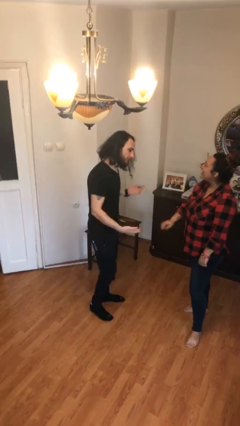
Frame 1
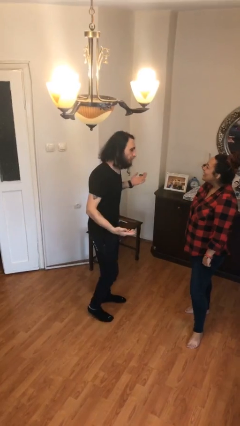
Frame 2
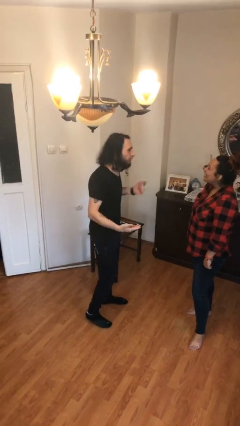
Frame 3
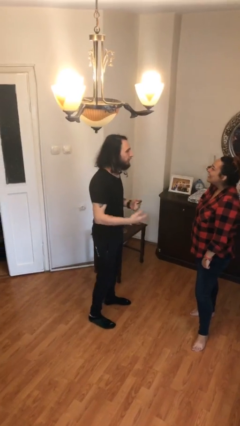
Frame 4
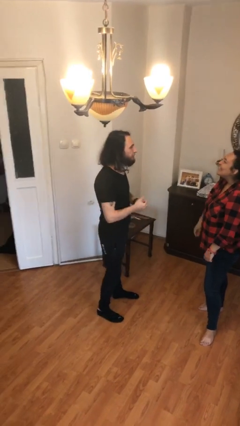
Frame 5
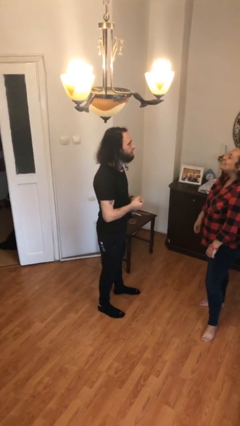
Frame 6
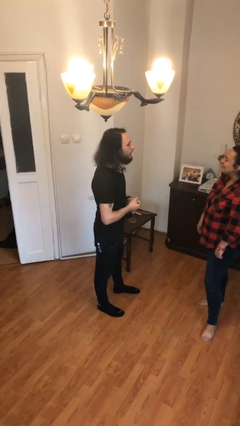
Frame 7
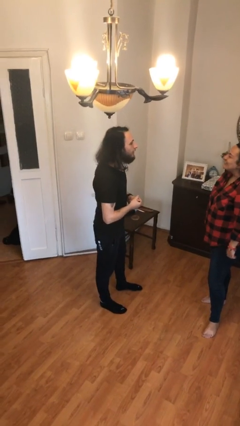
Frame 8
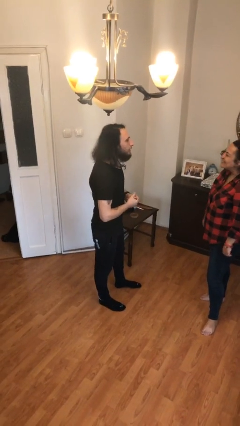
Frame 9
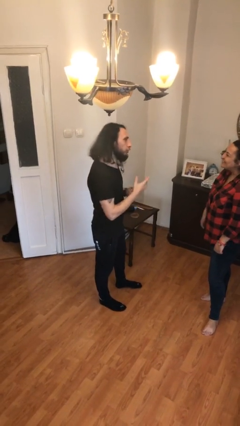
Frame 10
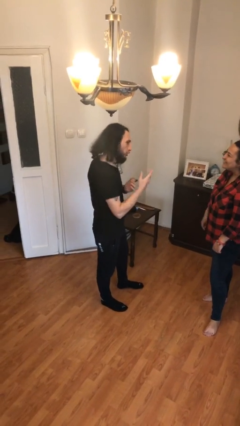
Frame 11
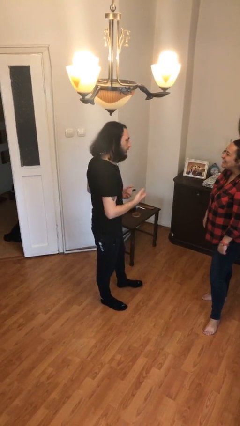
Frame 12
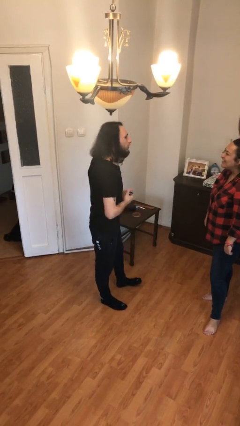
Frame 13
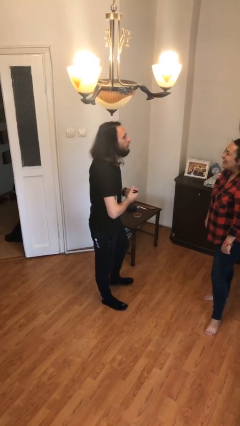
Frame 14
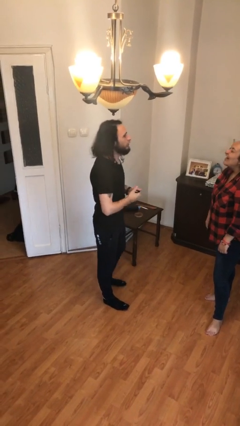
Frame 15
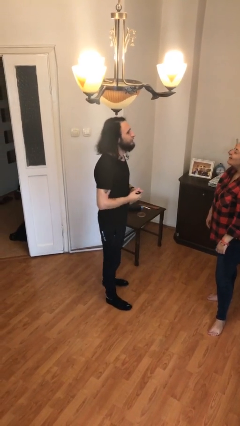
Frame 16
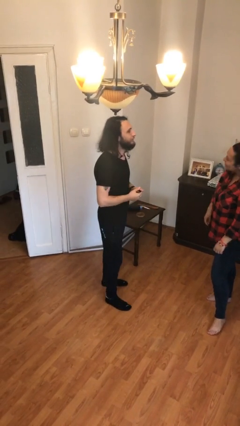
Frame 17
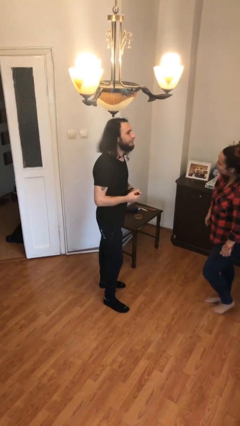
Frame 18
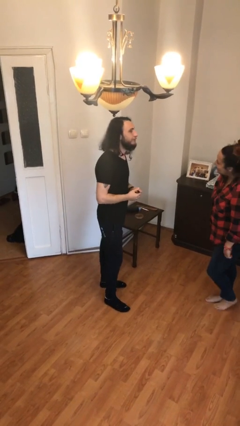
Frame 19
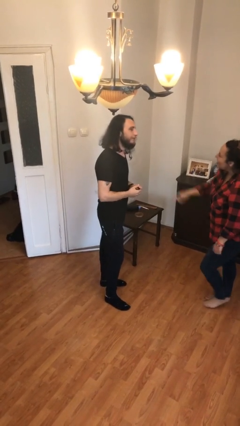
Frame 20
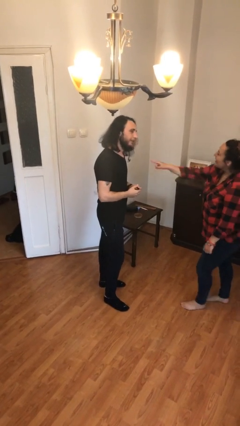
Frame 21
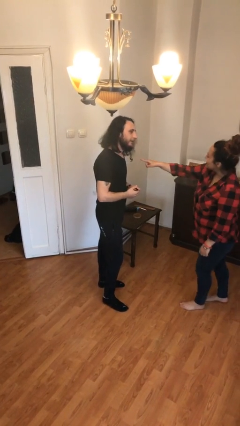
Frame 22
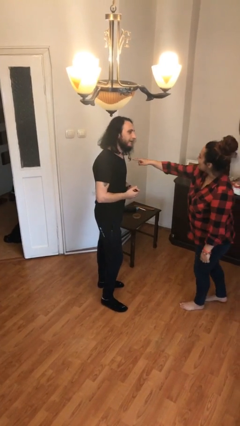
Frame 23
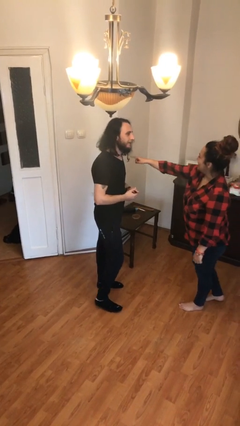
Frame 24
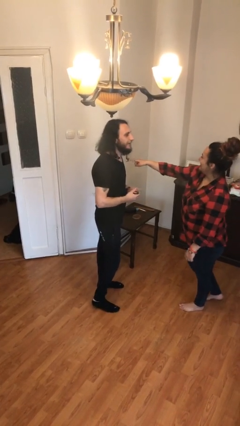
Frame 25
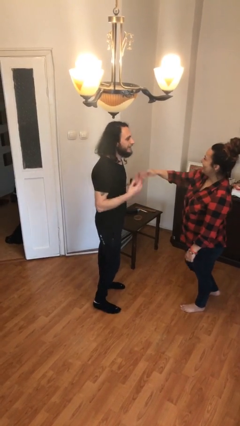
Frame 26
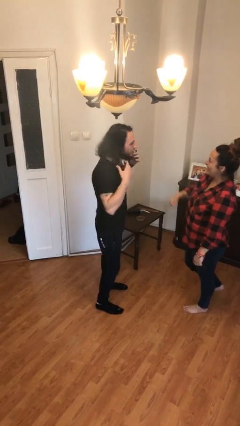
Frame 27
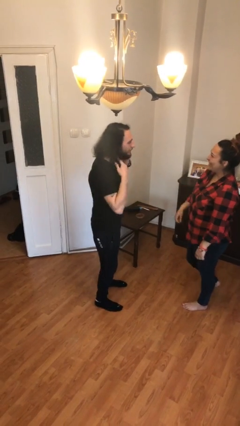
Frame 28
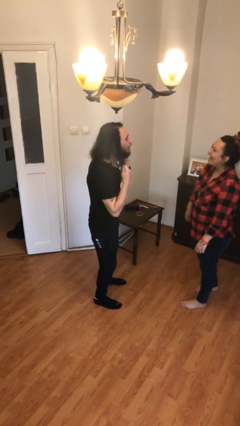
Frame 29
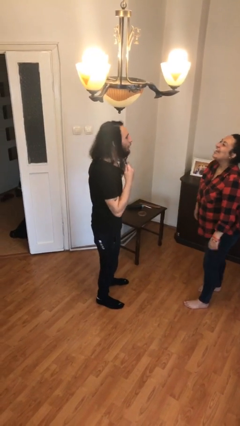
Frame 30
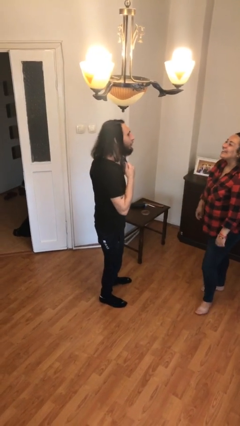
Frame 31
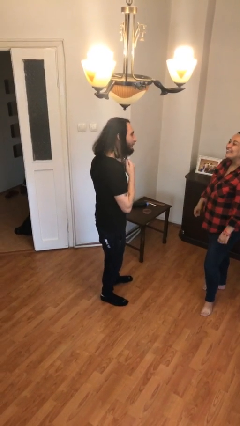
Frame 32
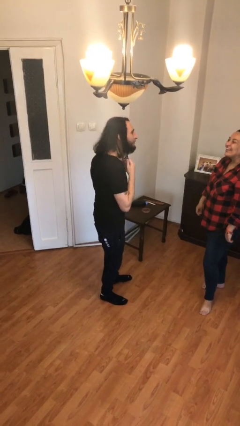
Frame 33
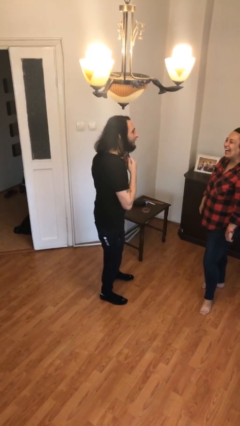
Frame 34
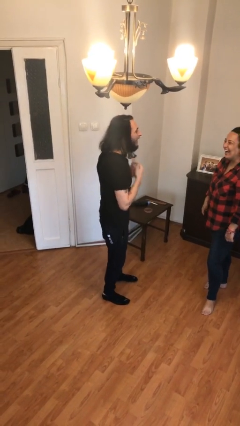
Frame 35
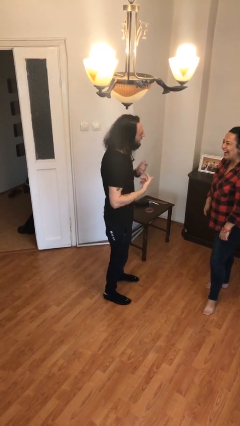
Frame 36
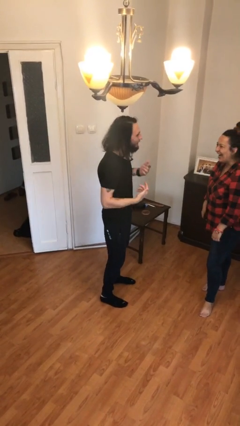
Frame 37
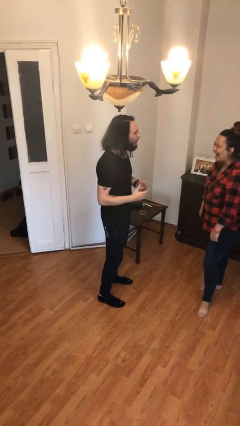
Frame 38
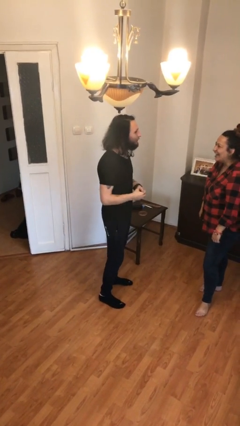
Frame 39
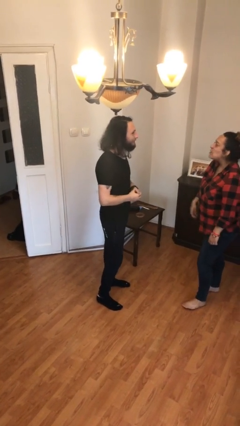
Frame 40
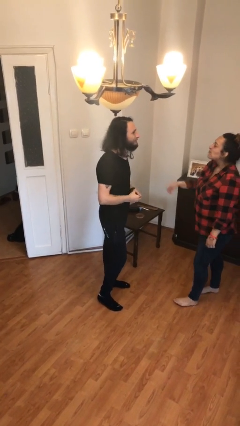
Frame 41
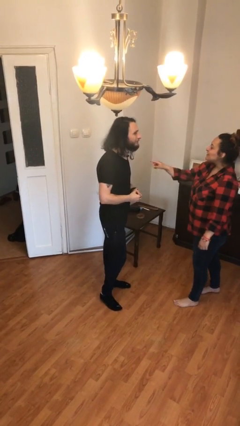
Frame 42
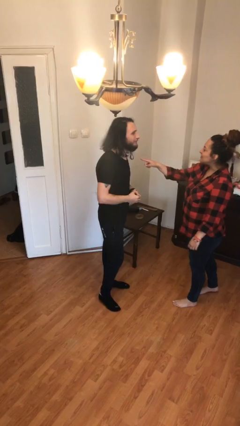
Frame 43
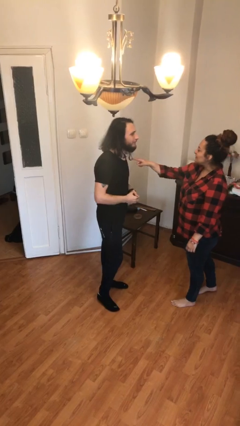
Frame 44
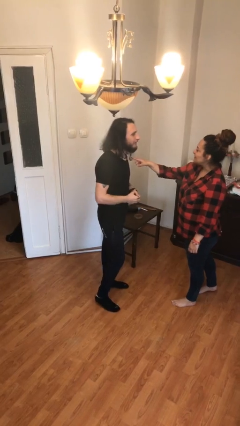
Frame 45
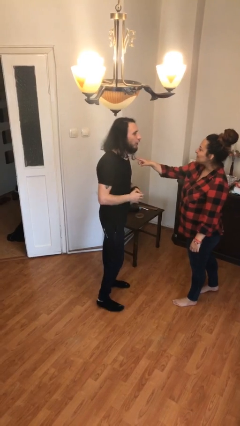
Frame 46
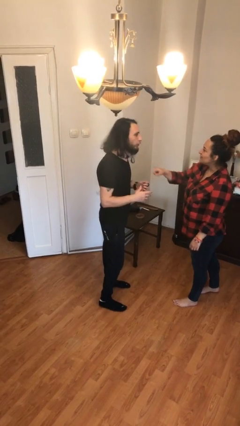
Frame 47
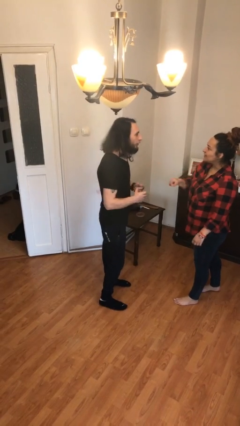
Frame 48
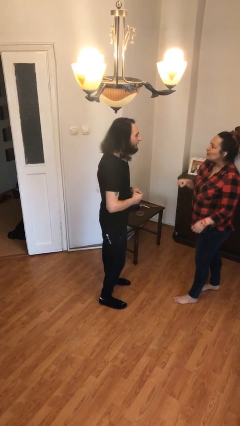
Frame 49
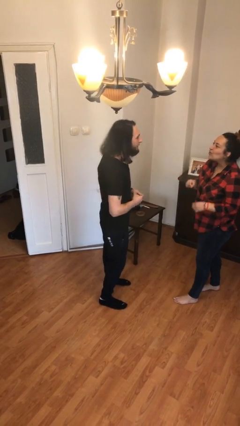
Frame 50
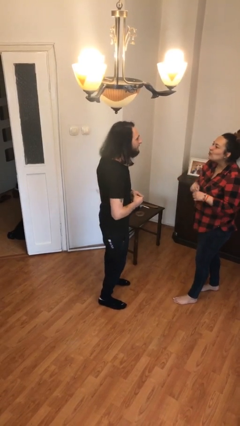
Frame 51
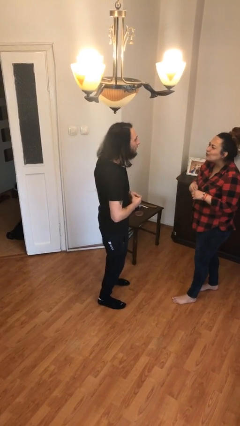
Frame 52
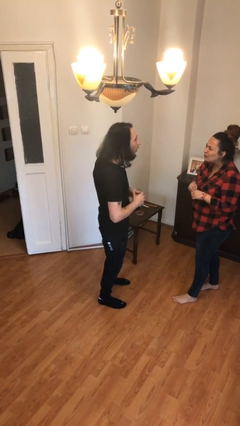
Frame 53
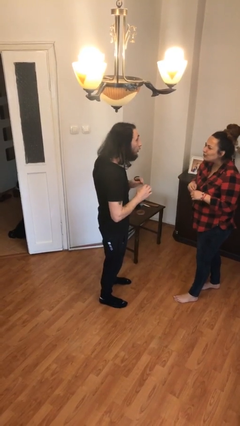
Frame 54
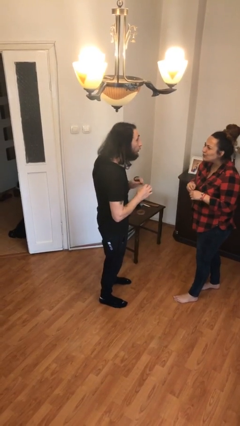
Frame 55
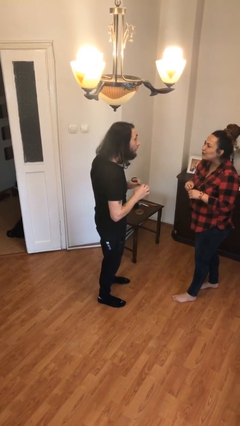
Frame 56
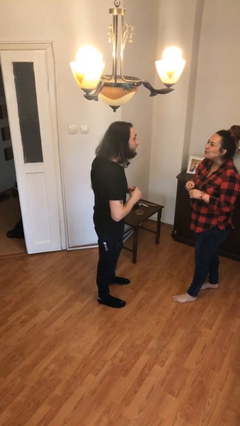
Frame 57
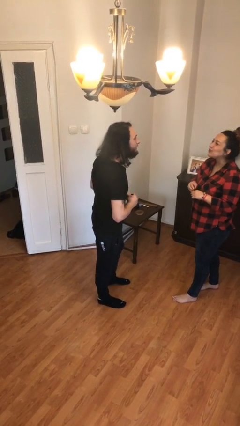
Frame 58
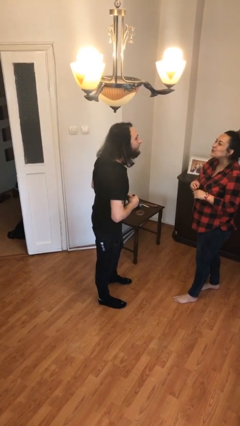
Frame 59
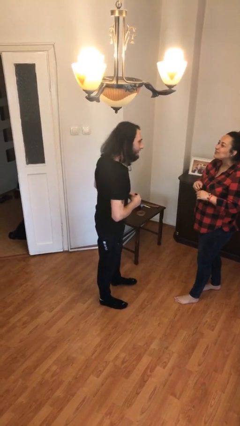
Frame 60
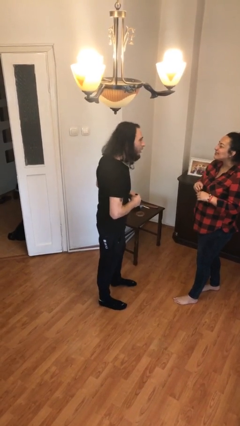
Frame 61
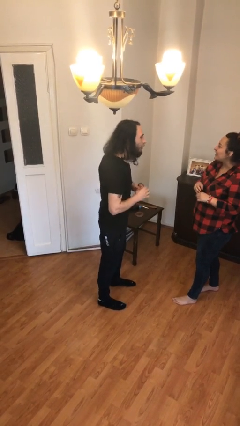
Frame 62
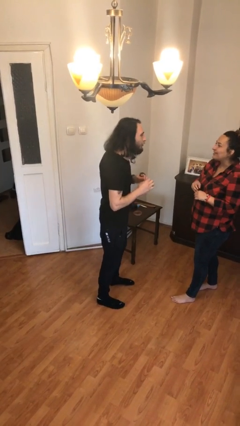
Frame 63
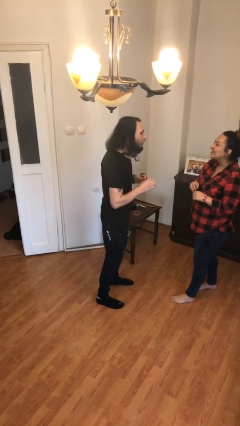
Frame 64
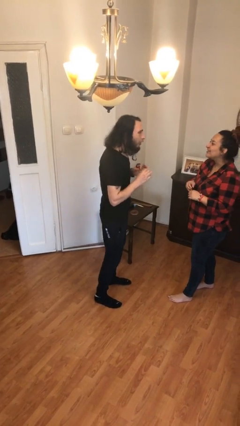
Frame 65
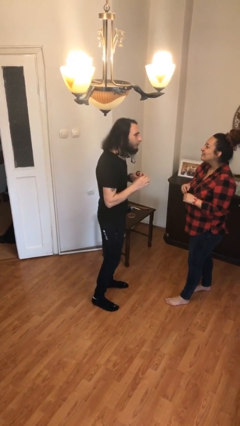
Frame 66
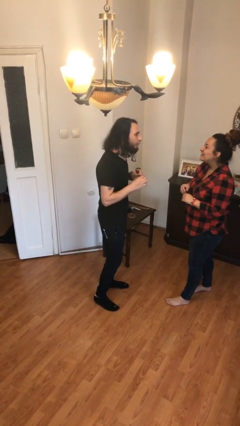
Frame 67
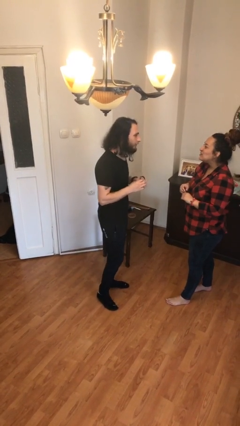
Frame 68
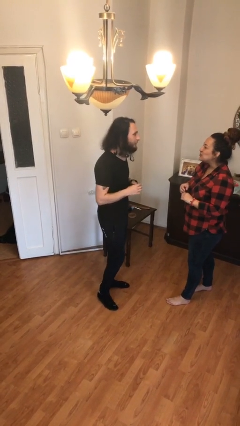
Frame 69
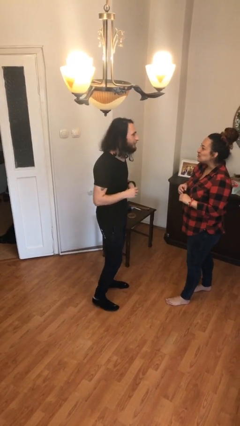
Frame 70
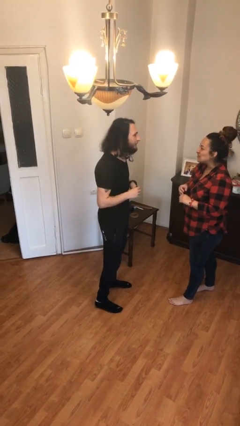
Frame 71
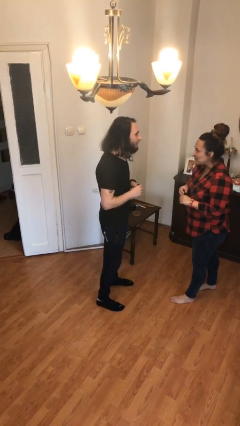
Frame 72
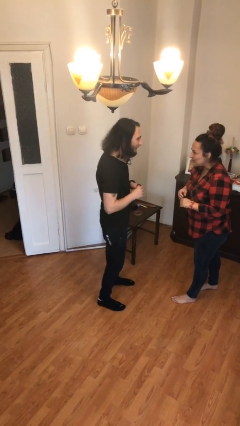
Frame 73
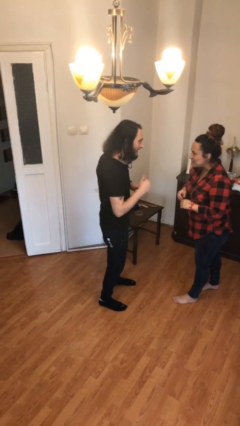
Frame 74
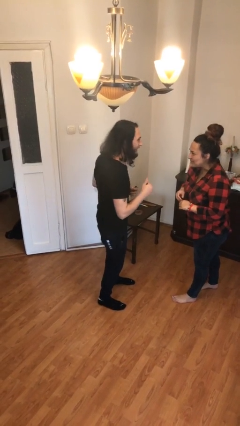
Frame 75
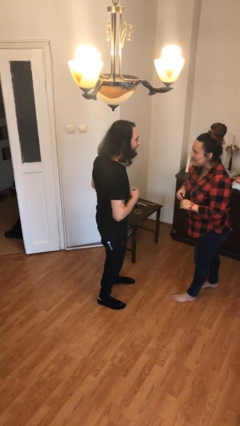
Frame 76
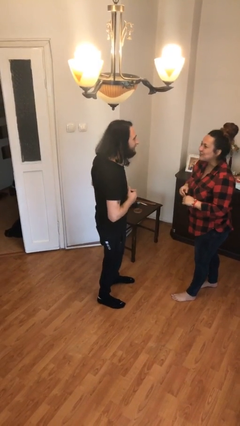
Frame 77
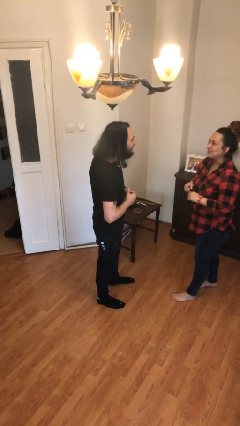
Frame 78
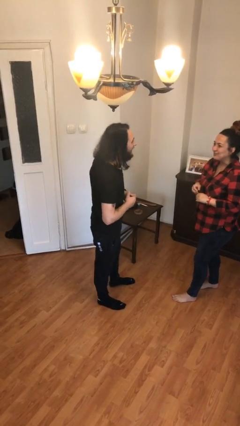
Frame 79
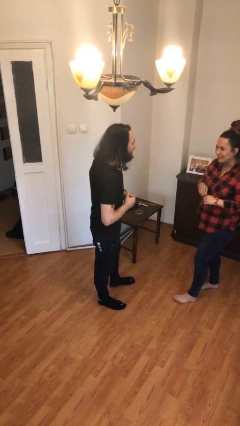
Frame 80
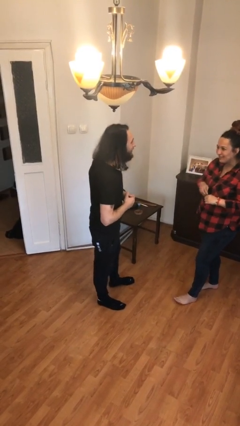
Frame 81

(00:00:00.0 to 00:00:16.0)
person talks to person

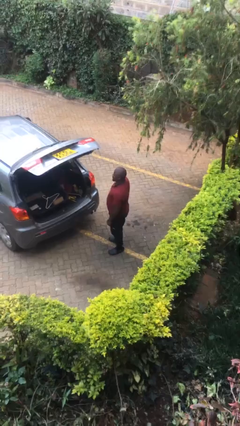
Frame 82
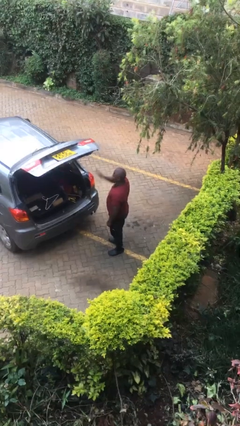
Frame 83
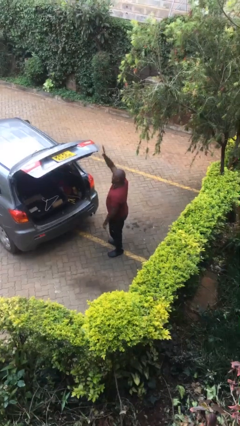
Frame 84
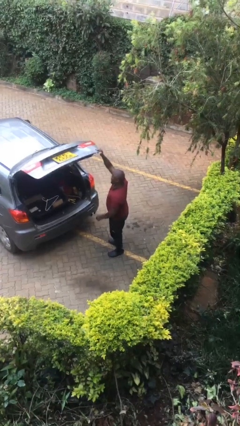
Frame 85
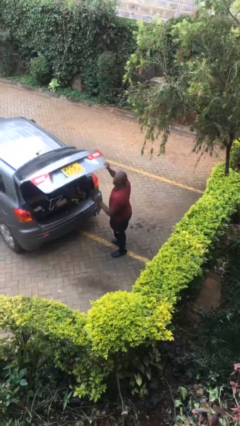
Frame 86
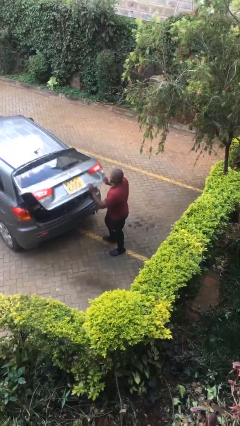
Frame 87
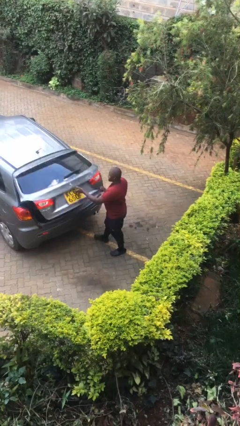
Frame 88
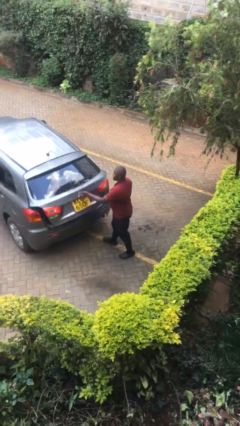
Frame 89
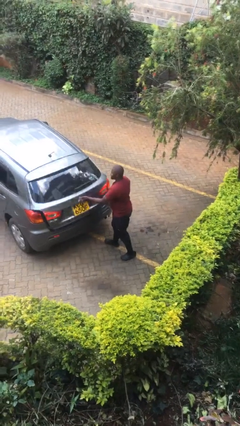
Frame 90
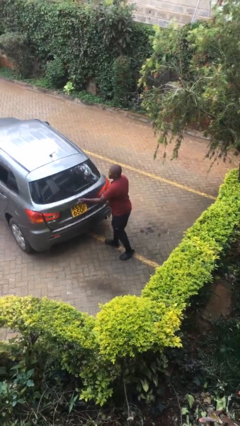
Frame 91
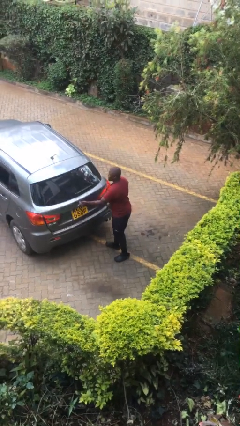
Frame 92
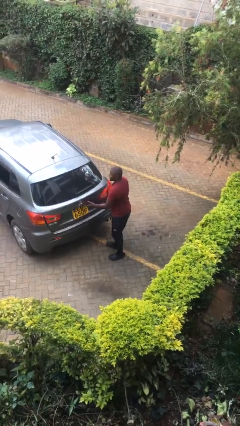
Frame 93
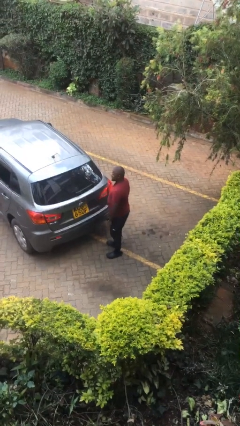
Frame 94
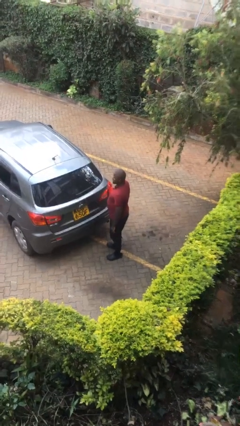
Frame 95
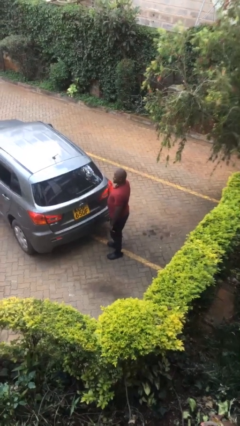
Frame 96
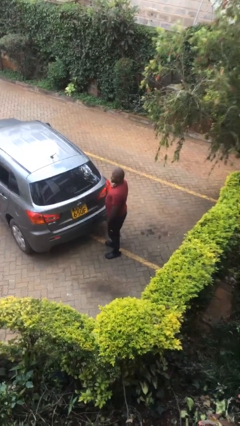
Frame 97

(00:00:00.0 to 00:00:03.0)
person closes car trunk
